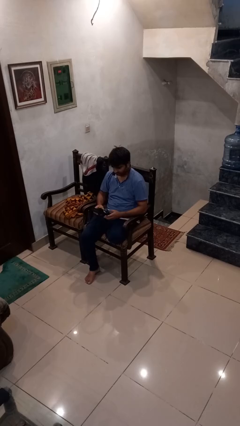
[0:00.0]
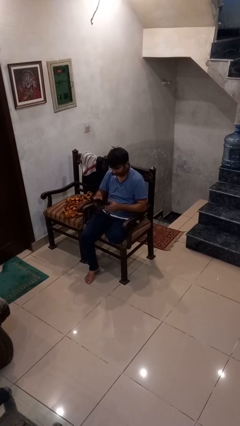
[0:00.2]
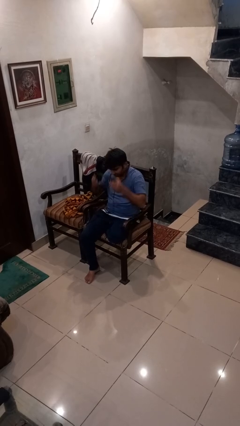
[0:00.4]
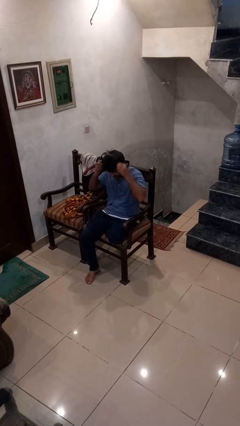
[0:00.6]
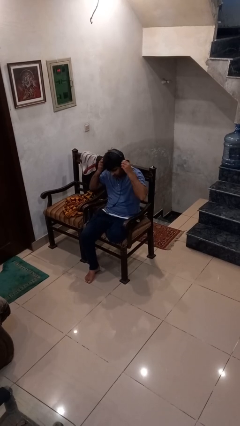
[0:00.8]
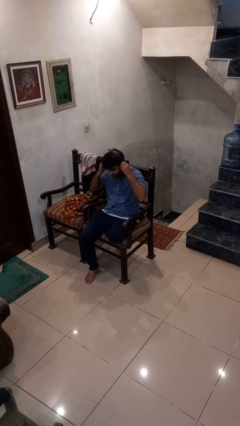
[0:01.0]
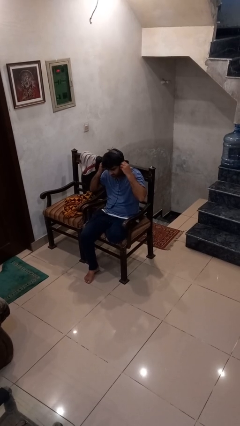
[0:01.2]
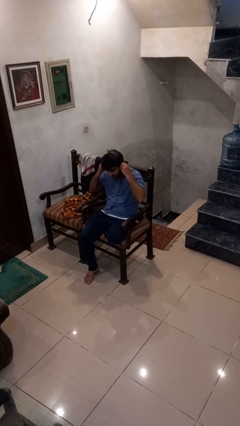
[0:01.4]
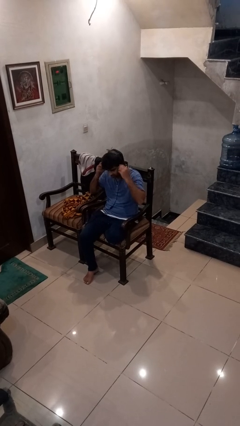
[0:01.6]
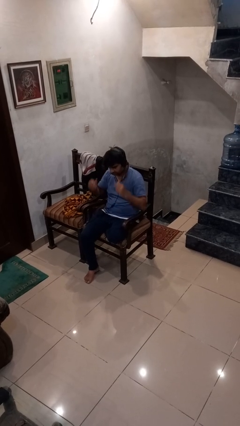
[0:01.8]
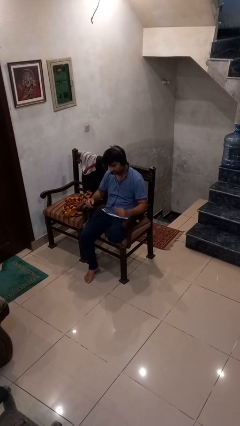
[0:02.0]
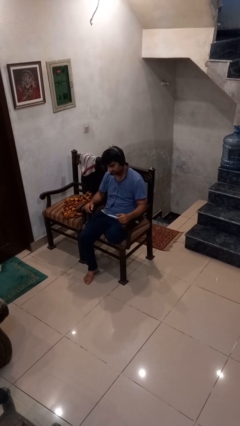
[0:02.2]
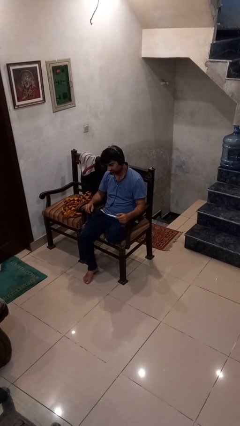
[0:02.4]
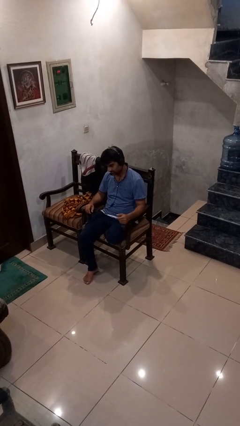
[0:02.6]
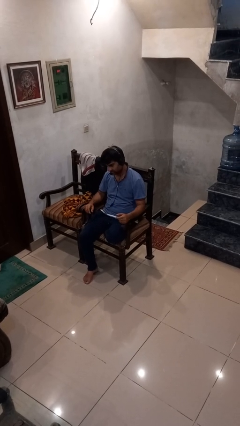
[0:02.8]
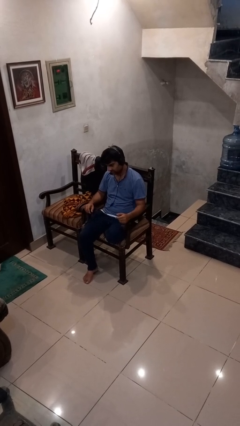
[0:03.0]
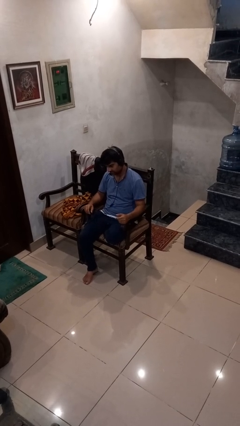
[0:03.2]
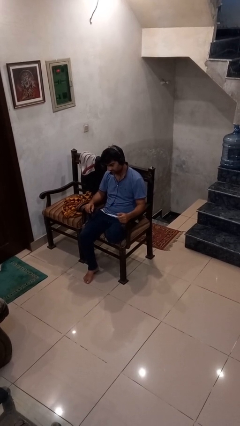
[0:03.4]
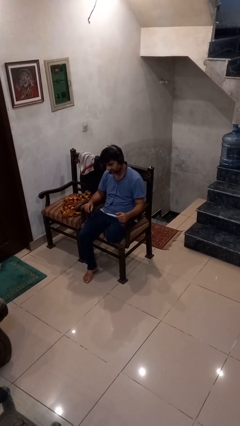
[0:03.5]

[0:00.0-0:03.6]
person puts on headphones

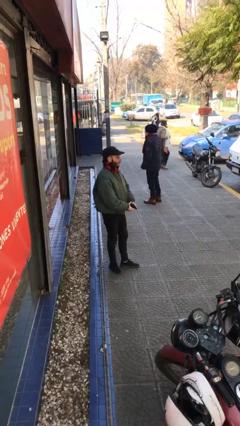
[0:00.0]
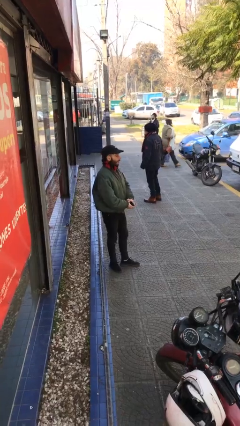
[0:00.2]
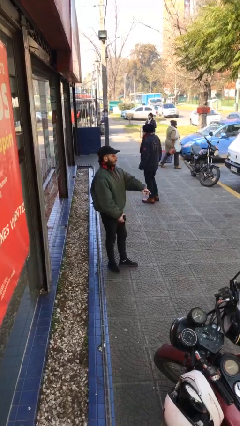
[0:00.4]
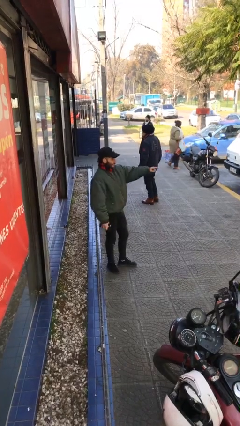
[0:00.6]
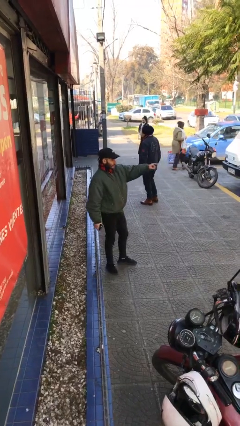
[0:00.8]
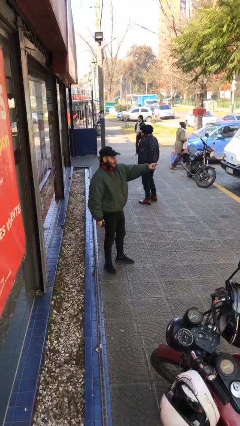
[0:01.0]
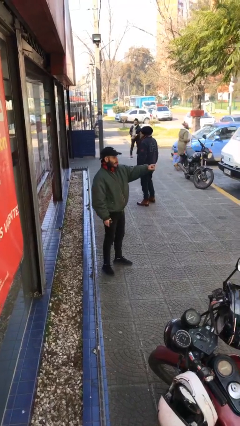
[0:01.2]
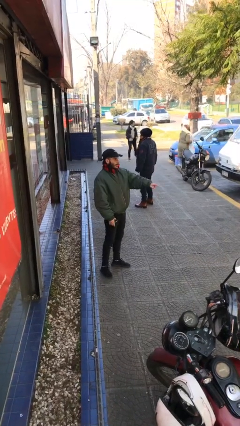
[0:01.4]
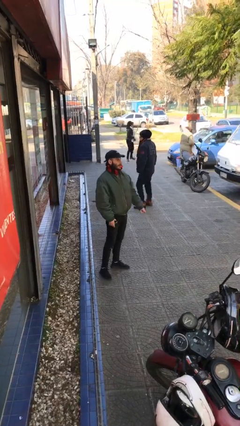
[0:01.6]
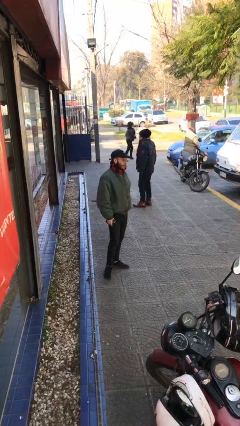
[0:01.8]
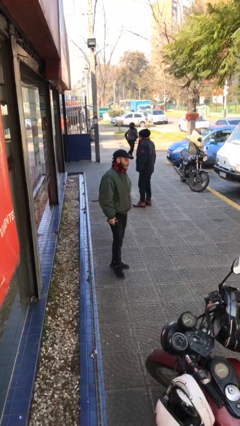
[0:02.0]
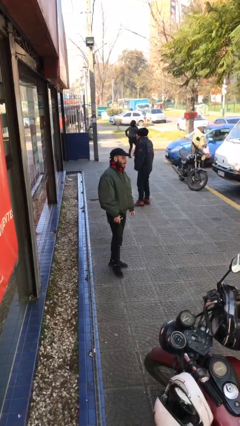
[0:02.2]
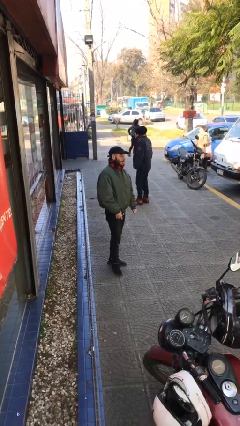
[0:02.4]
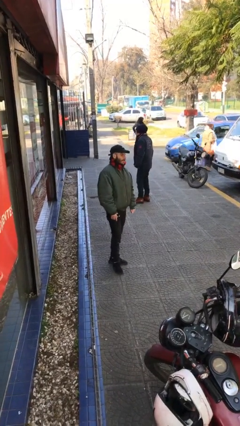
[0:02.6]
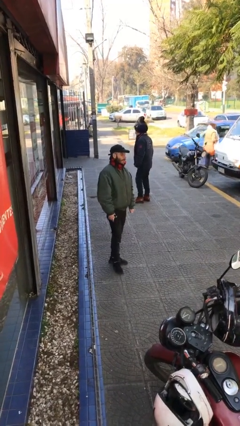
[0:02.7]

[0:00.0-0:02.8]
person points at person

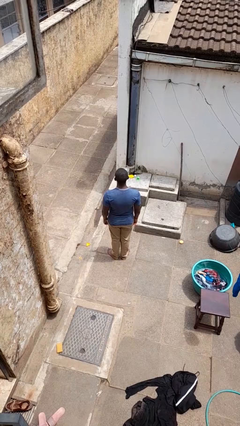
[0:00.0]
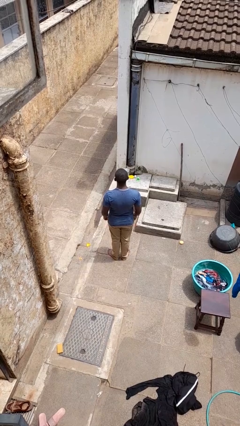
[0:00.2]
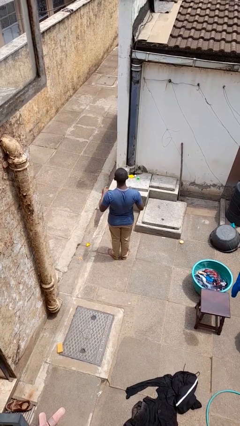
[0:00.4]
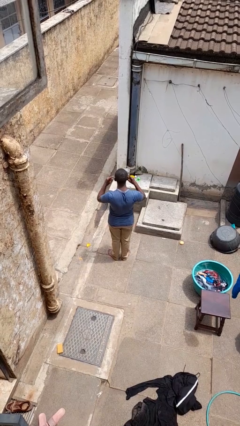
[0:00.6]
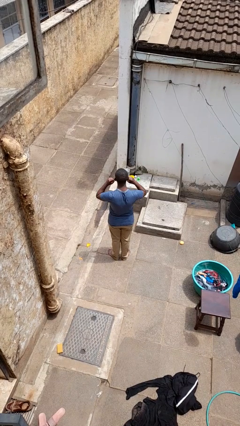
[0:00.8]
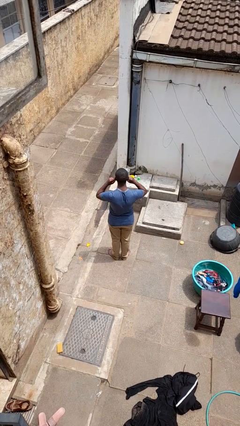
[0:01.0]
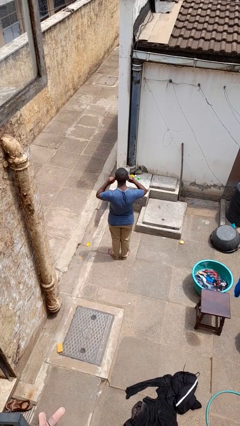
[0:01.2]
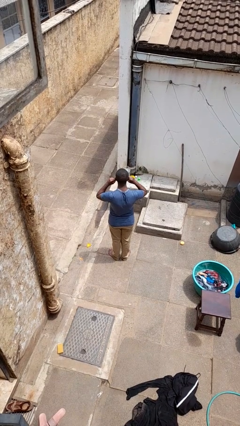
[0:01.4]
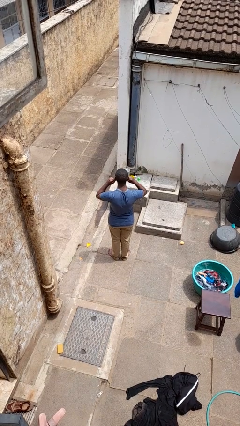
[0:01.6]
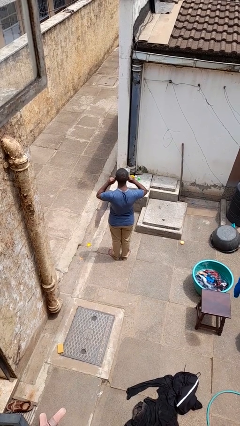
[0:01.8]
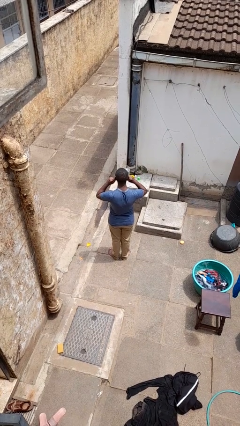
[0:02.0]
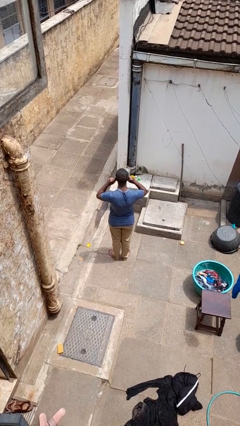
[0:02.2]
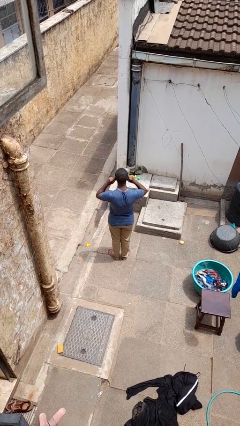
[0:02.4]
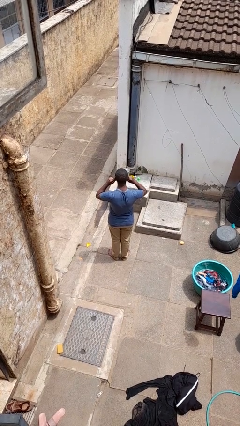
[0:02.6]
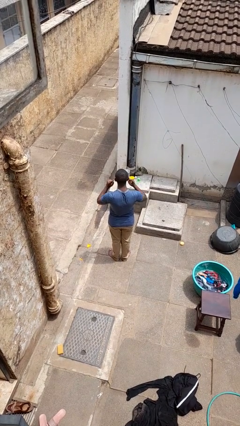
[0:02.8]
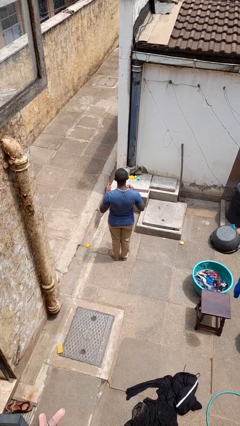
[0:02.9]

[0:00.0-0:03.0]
person puts fingers in ear

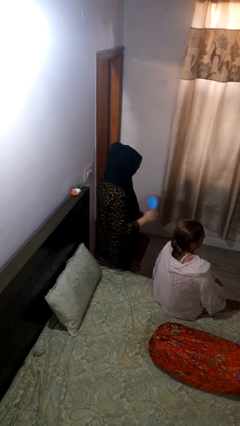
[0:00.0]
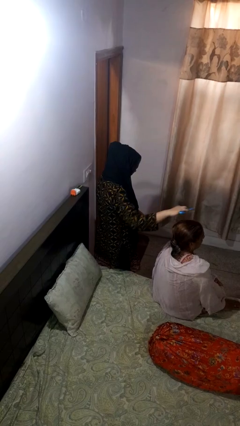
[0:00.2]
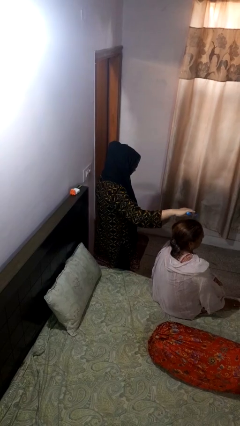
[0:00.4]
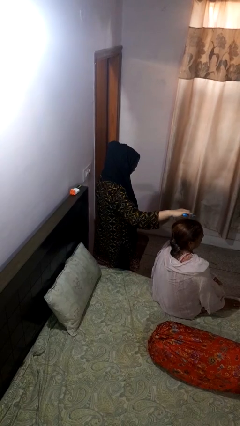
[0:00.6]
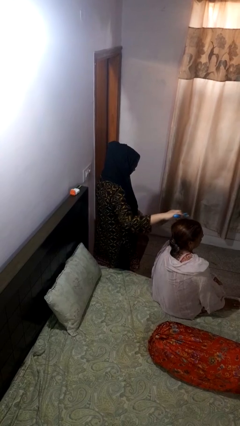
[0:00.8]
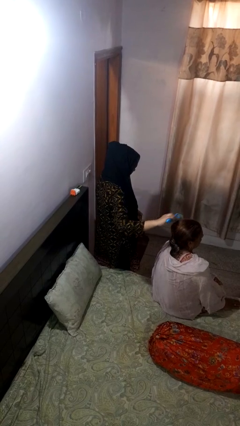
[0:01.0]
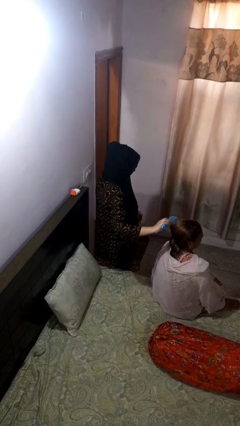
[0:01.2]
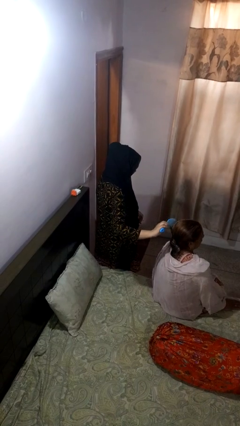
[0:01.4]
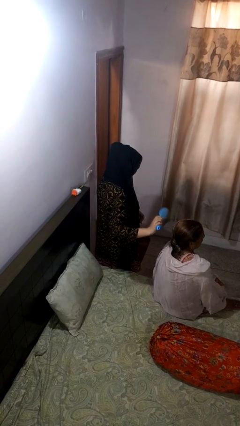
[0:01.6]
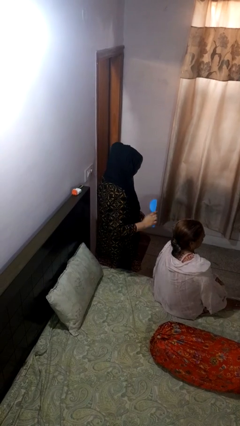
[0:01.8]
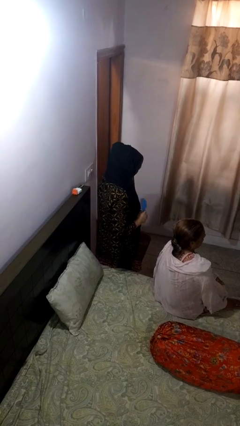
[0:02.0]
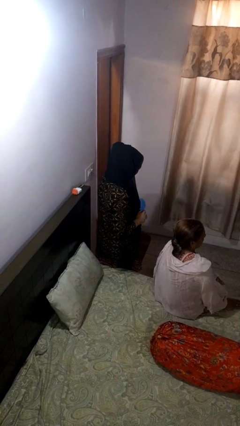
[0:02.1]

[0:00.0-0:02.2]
person brushes hair of person

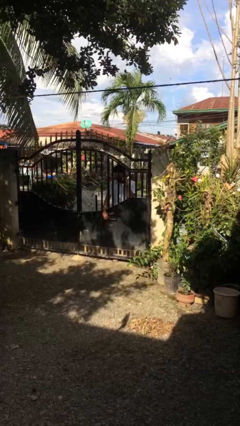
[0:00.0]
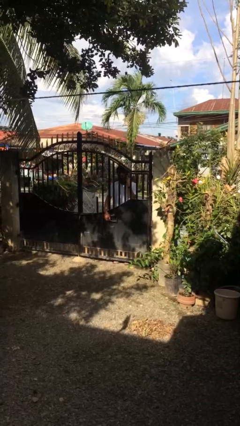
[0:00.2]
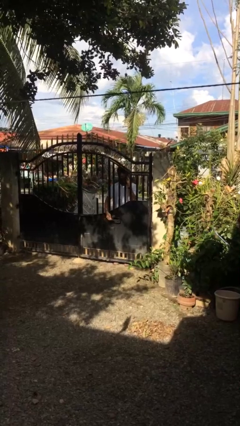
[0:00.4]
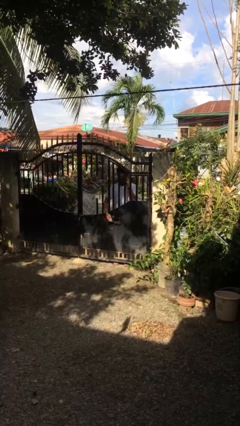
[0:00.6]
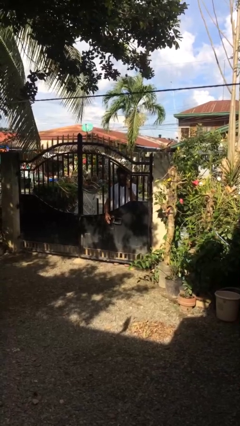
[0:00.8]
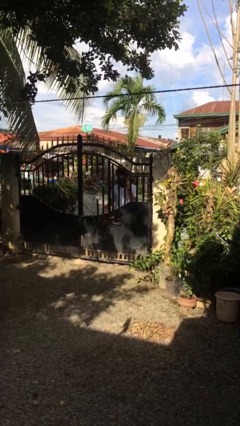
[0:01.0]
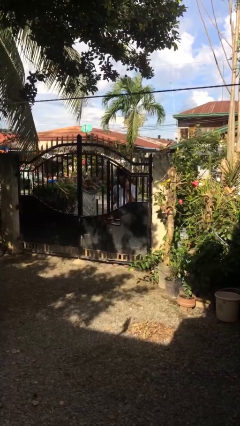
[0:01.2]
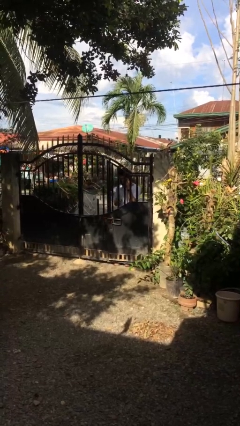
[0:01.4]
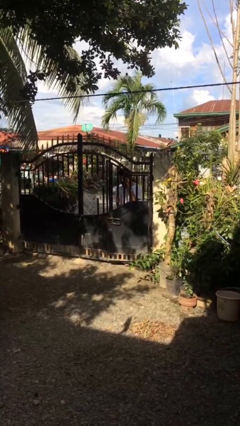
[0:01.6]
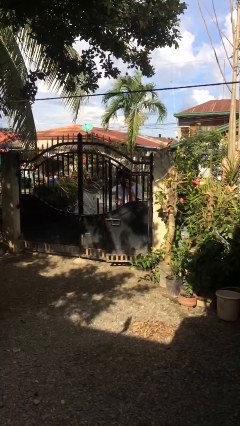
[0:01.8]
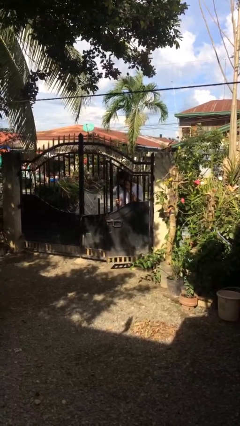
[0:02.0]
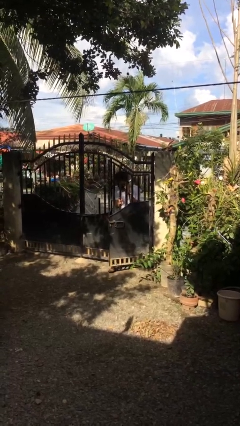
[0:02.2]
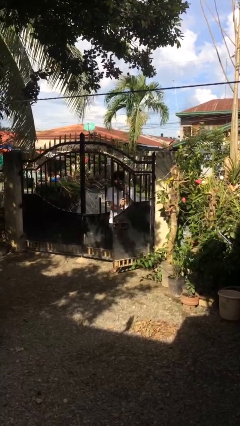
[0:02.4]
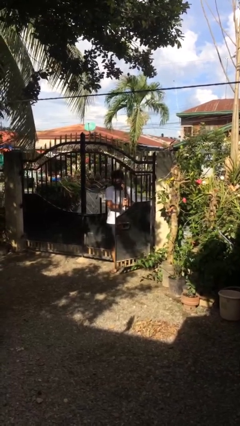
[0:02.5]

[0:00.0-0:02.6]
person opens facility door

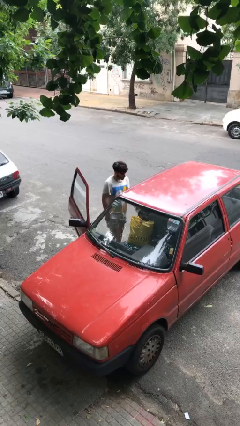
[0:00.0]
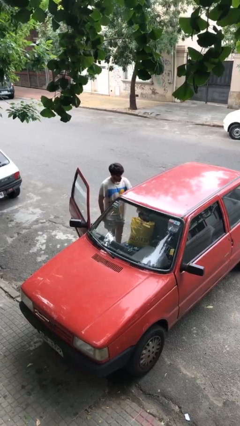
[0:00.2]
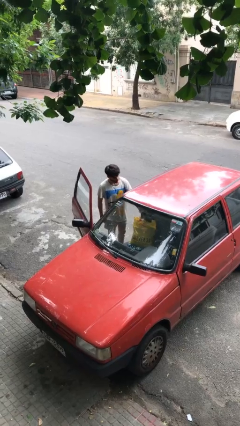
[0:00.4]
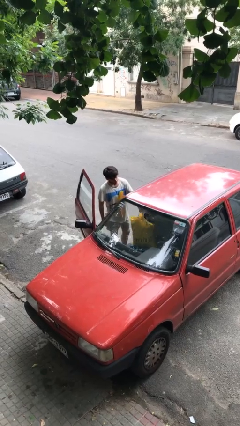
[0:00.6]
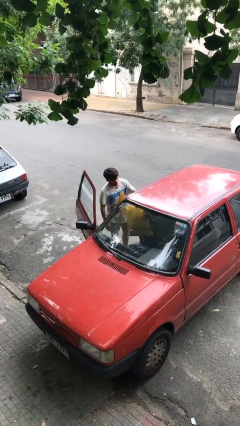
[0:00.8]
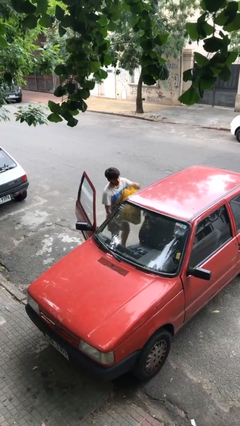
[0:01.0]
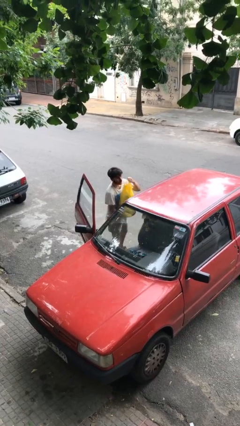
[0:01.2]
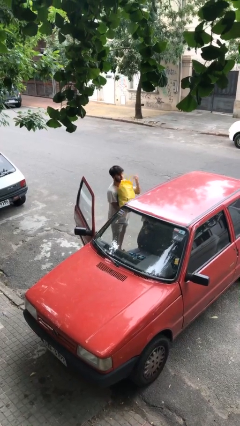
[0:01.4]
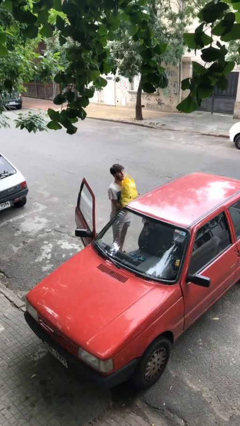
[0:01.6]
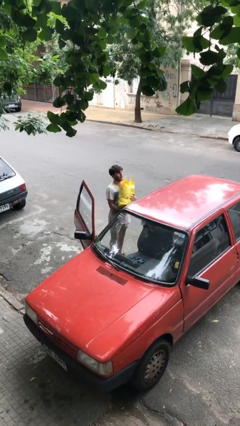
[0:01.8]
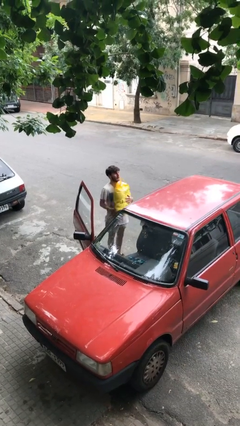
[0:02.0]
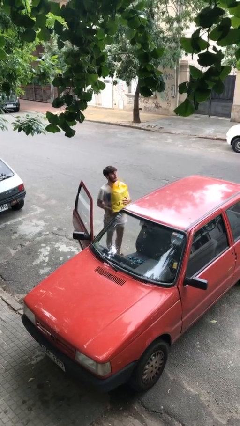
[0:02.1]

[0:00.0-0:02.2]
person unloads car

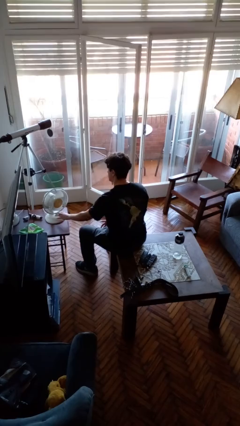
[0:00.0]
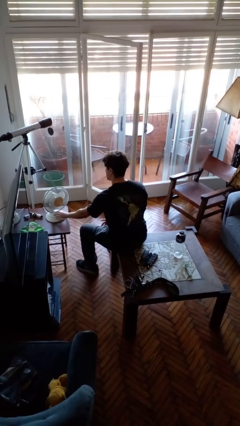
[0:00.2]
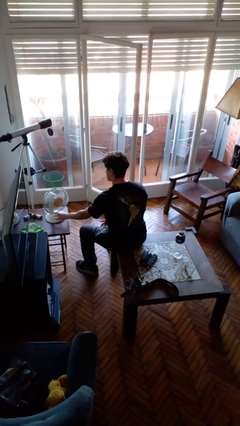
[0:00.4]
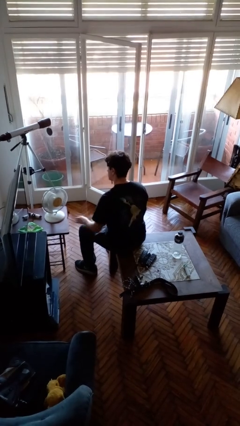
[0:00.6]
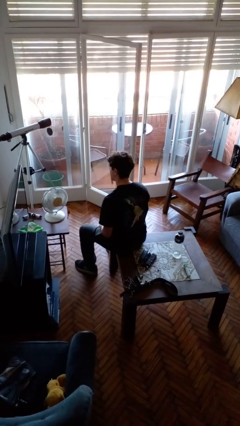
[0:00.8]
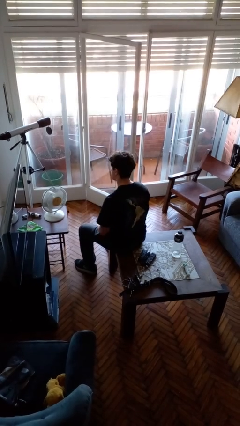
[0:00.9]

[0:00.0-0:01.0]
person turns on fan
